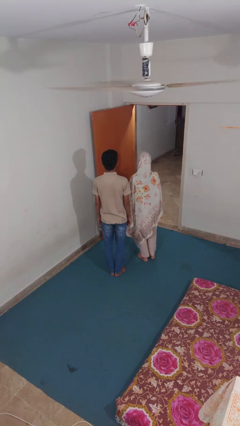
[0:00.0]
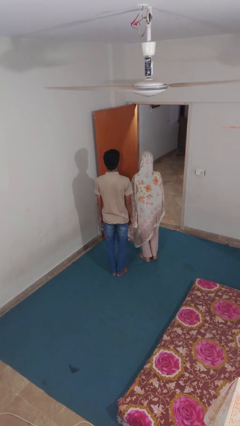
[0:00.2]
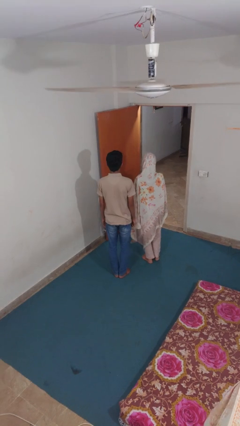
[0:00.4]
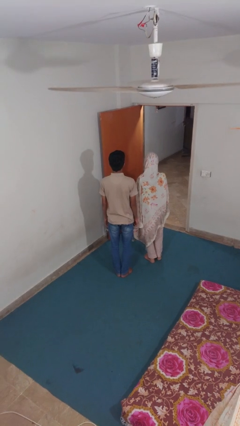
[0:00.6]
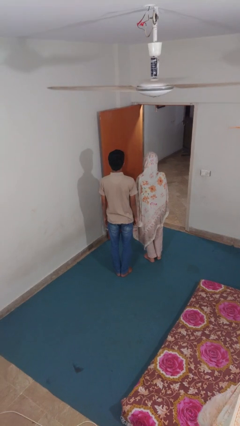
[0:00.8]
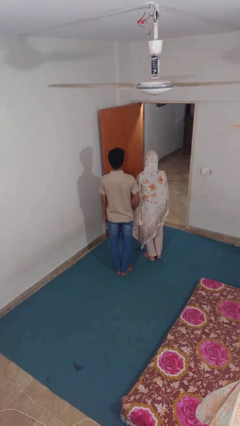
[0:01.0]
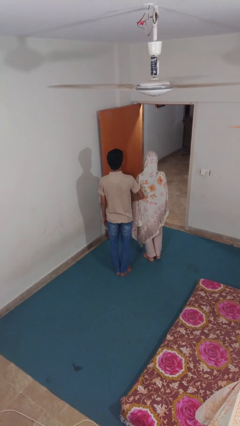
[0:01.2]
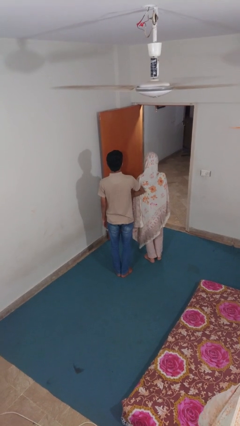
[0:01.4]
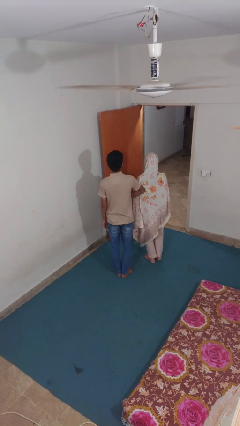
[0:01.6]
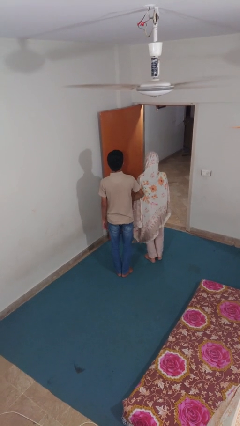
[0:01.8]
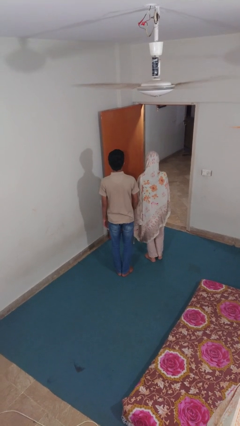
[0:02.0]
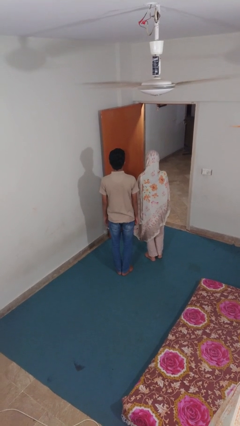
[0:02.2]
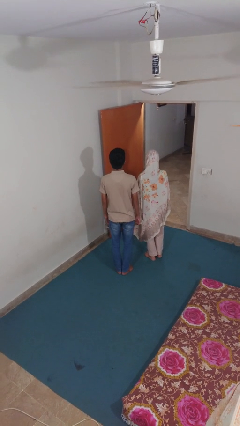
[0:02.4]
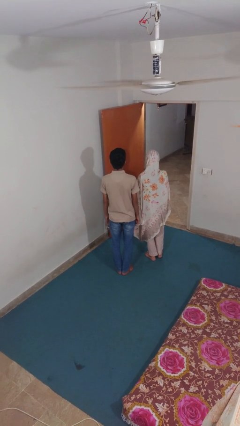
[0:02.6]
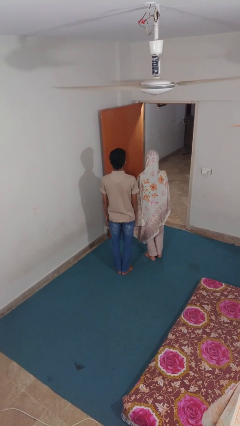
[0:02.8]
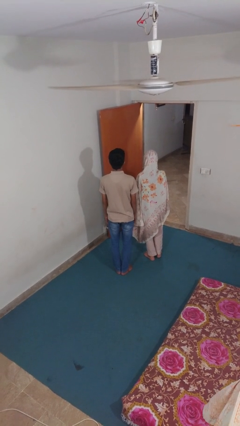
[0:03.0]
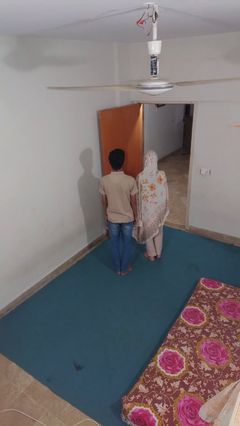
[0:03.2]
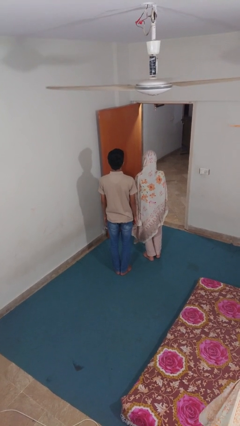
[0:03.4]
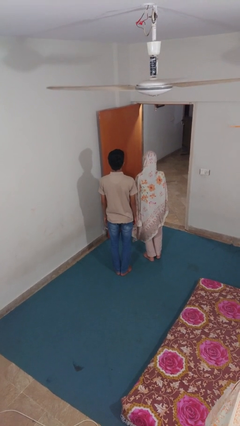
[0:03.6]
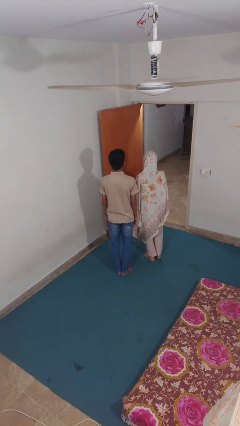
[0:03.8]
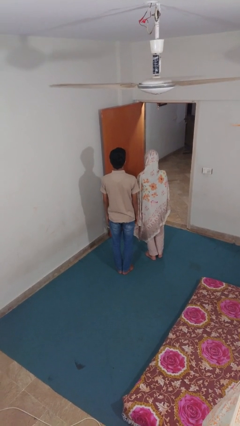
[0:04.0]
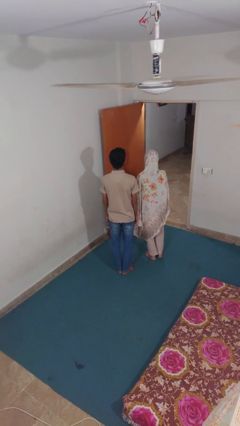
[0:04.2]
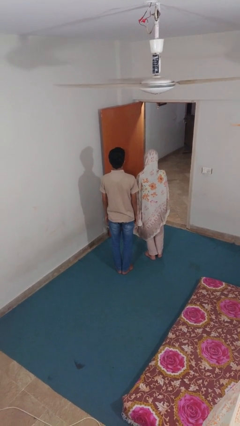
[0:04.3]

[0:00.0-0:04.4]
person nudges person with elbow

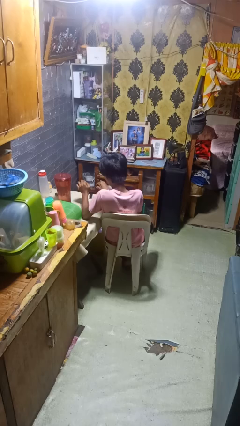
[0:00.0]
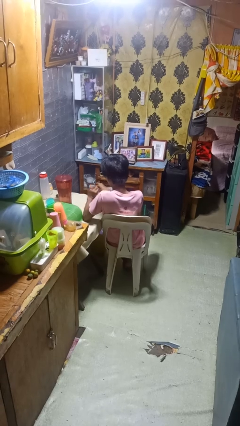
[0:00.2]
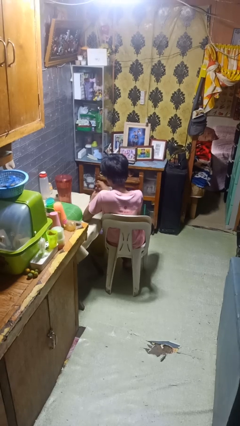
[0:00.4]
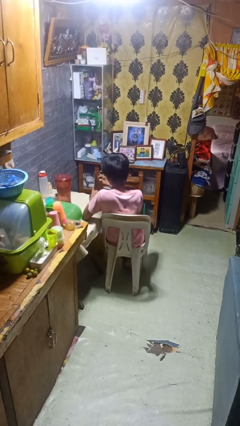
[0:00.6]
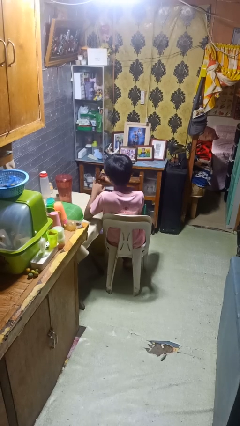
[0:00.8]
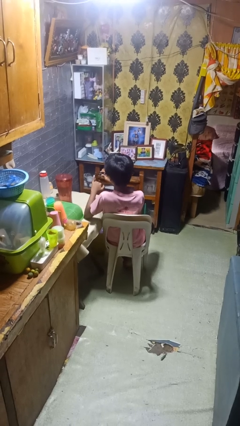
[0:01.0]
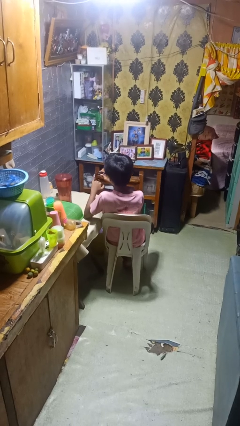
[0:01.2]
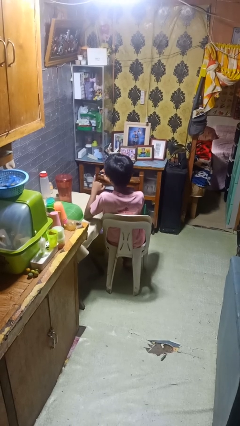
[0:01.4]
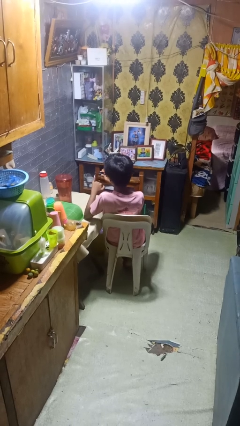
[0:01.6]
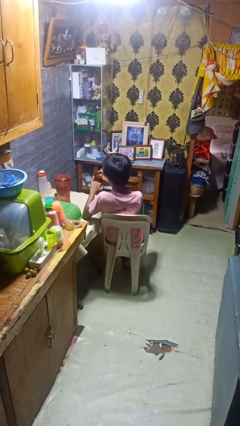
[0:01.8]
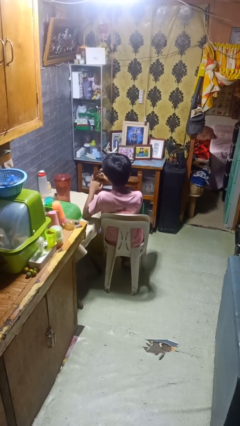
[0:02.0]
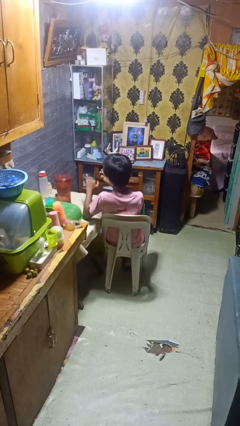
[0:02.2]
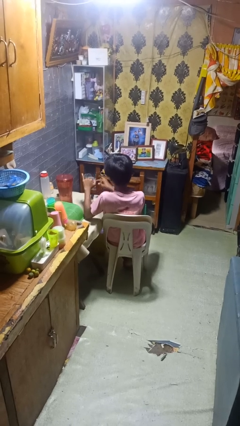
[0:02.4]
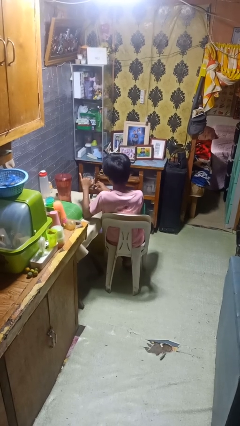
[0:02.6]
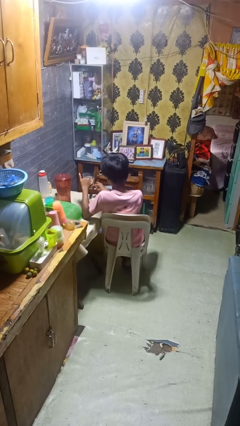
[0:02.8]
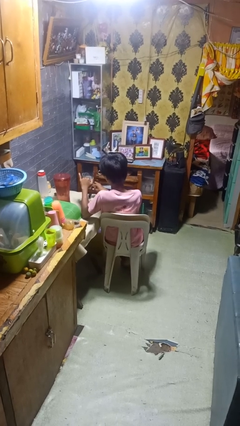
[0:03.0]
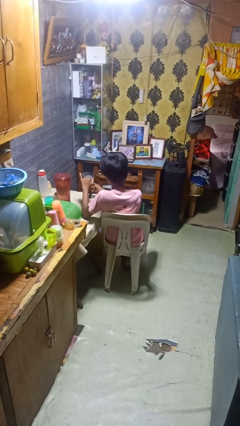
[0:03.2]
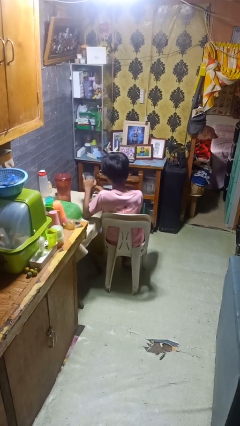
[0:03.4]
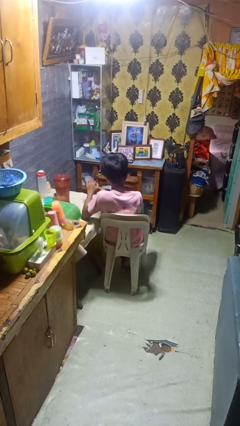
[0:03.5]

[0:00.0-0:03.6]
person paints fingernails

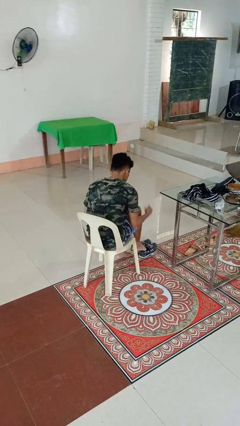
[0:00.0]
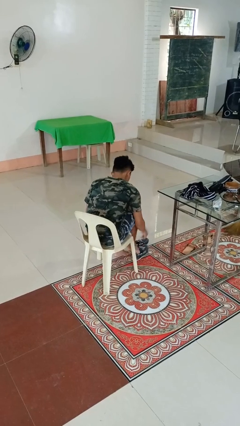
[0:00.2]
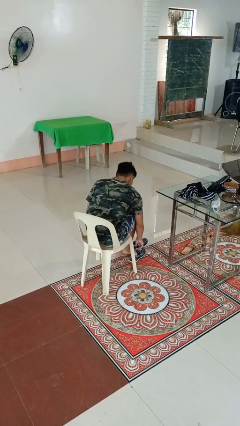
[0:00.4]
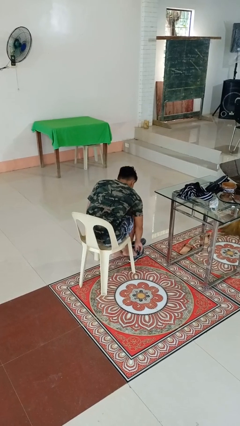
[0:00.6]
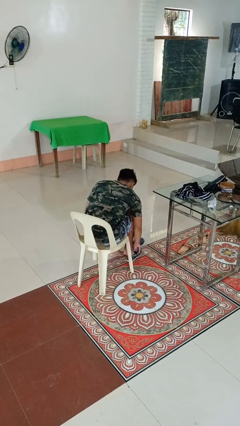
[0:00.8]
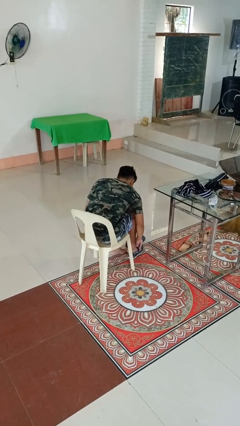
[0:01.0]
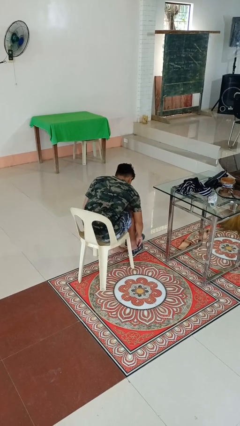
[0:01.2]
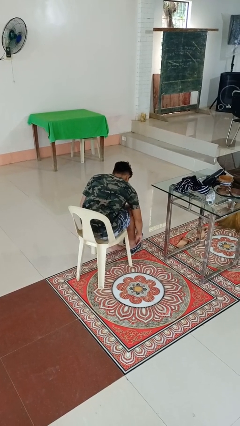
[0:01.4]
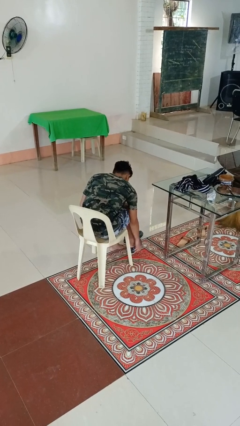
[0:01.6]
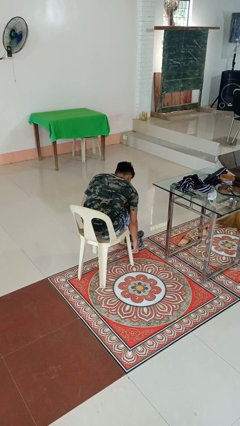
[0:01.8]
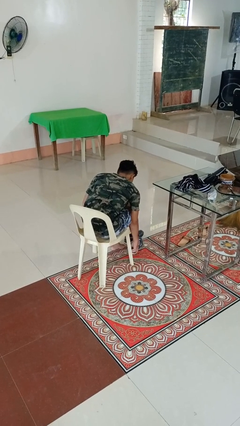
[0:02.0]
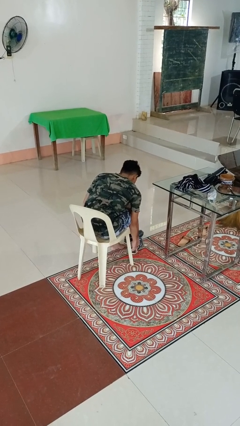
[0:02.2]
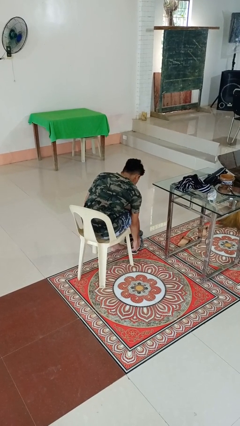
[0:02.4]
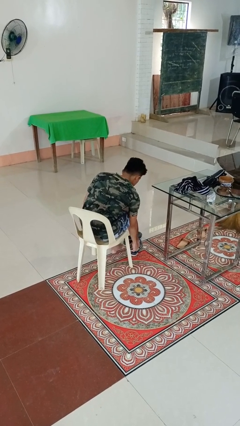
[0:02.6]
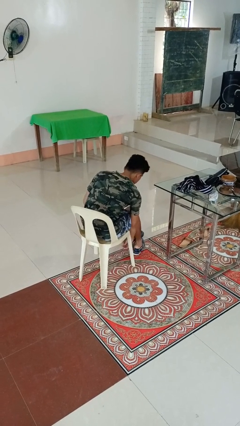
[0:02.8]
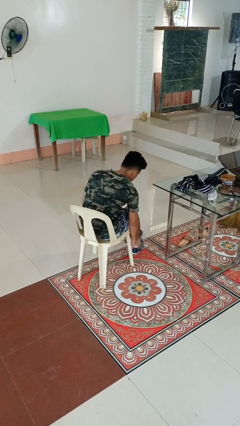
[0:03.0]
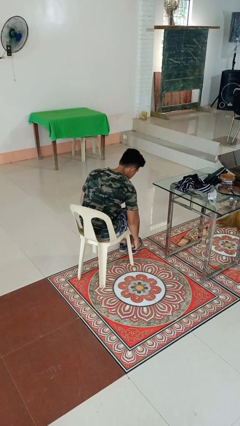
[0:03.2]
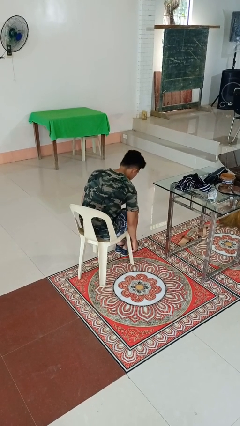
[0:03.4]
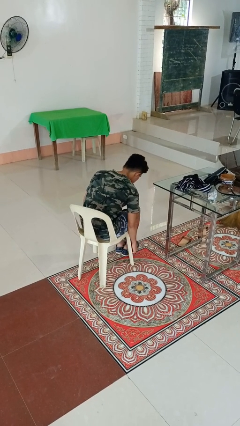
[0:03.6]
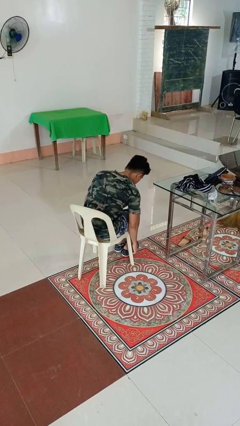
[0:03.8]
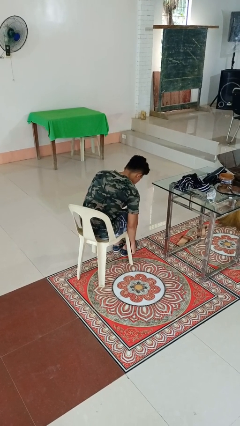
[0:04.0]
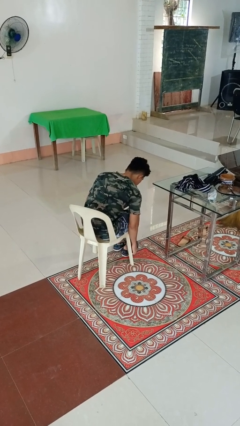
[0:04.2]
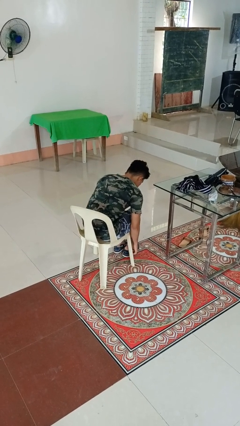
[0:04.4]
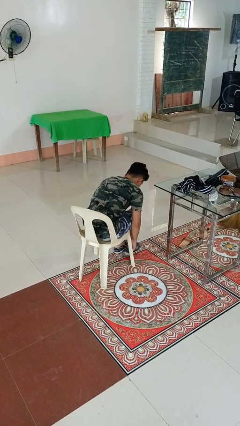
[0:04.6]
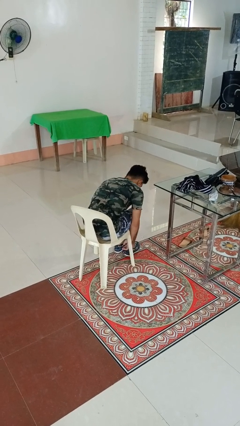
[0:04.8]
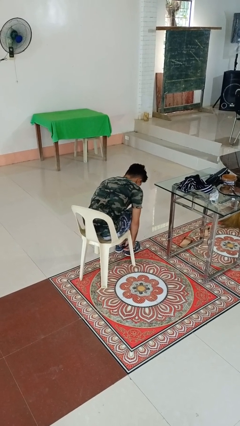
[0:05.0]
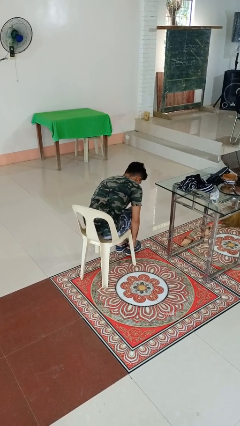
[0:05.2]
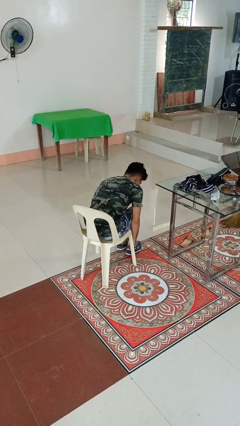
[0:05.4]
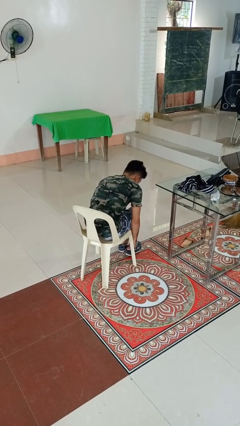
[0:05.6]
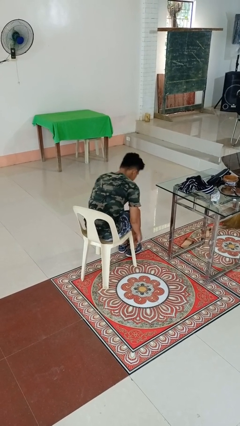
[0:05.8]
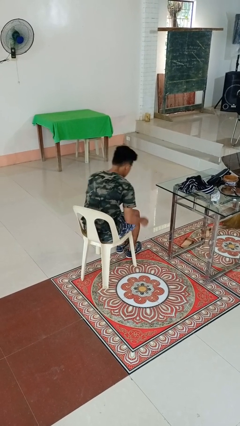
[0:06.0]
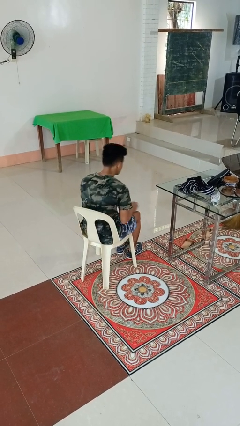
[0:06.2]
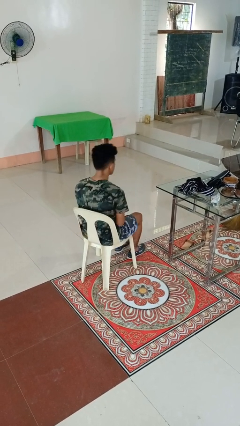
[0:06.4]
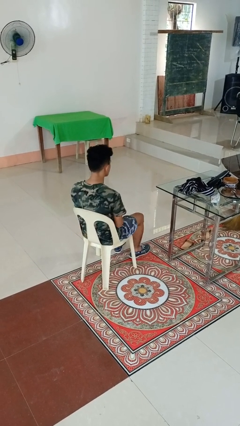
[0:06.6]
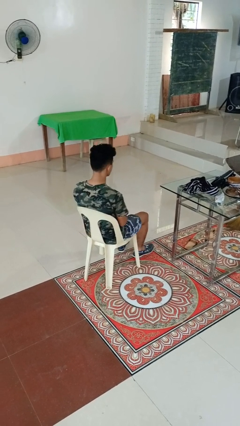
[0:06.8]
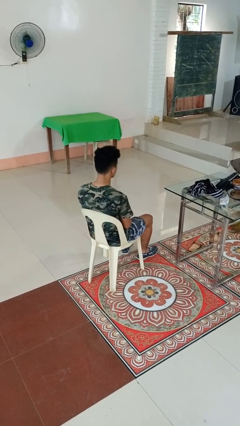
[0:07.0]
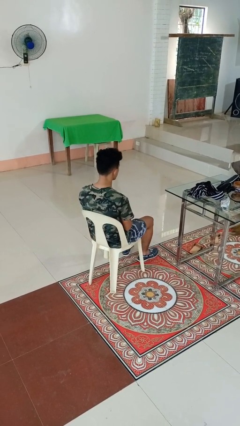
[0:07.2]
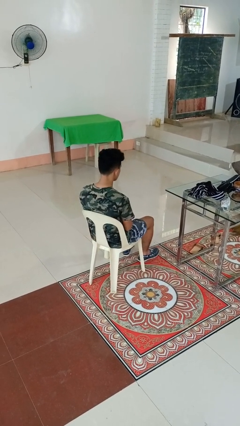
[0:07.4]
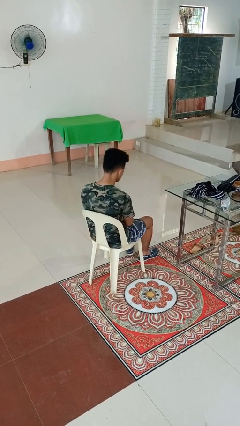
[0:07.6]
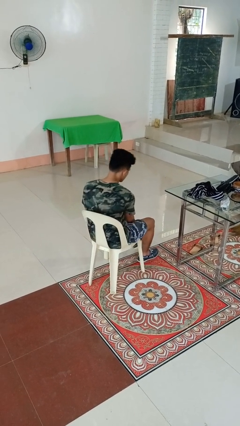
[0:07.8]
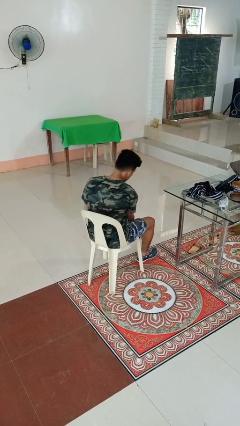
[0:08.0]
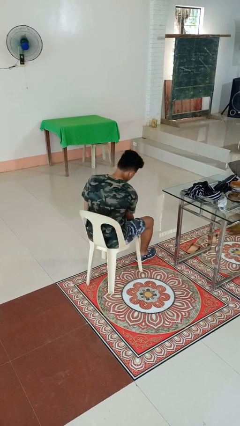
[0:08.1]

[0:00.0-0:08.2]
person puts on shoes

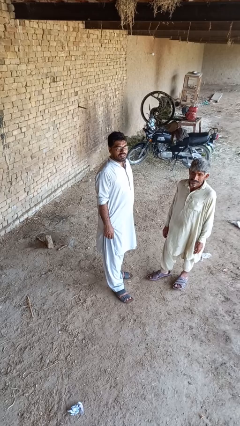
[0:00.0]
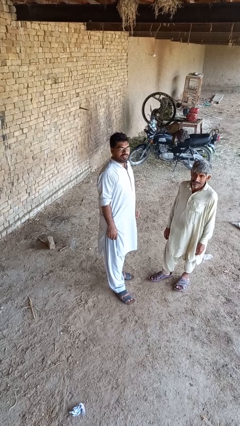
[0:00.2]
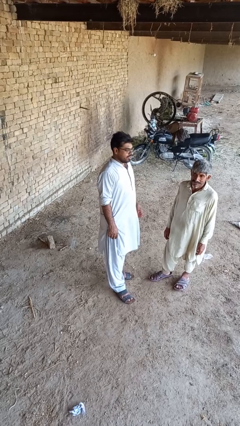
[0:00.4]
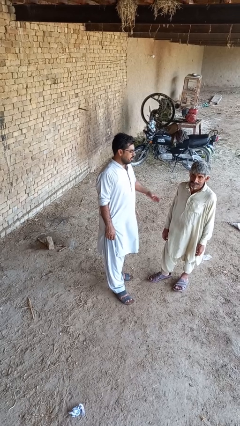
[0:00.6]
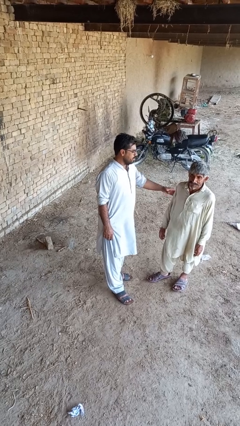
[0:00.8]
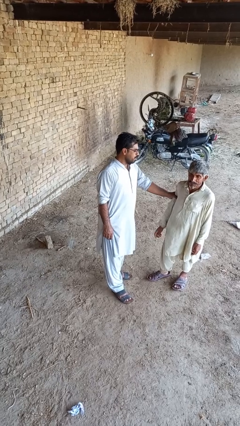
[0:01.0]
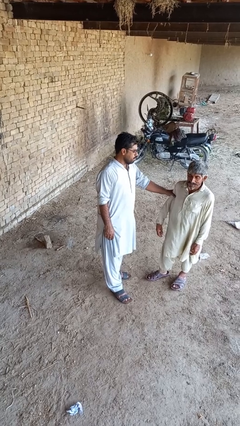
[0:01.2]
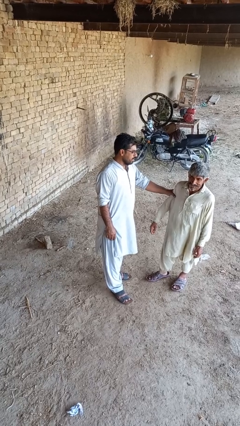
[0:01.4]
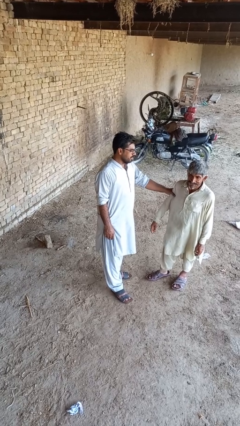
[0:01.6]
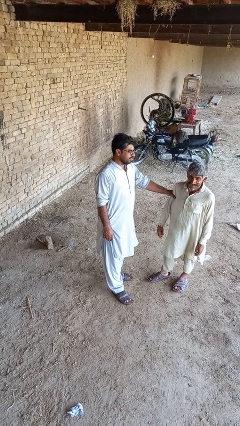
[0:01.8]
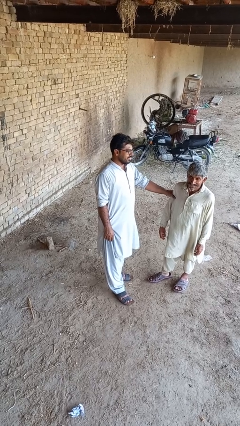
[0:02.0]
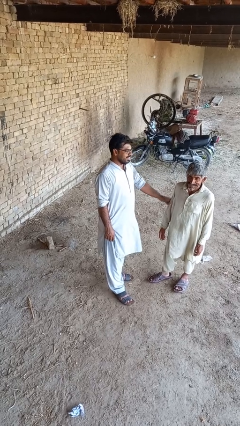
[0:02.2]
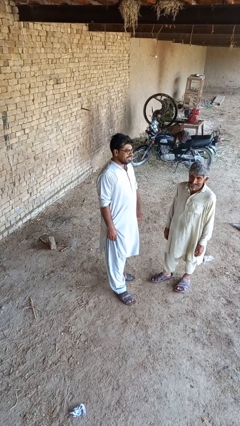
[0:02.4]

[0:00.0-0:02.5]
person grabs person by bicep
